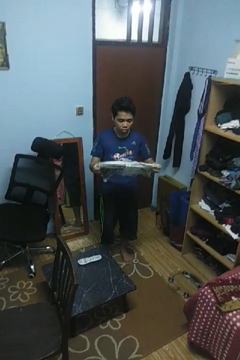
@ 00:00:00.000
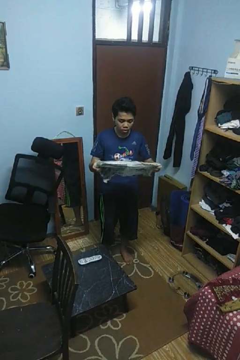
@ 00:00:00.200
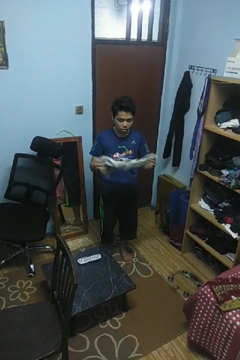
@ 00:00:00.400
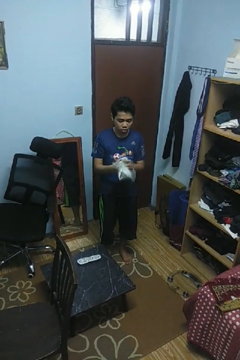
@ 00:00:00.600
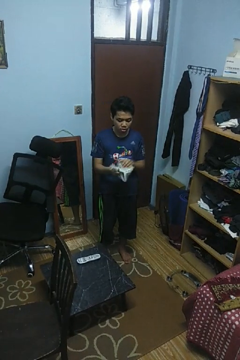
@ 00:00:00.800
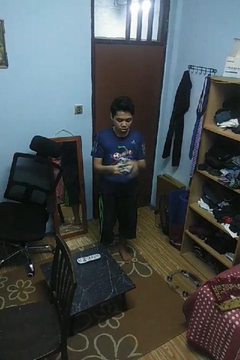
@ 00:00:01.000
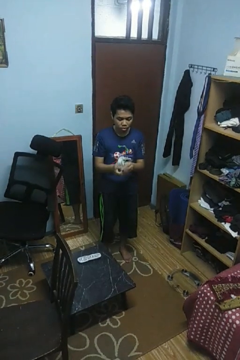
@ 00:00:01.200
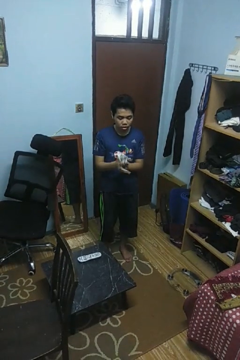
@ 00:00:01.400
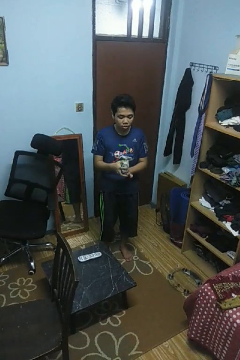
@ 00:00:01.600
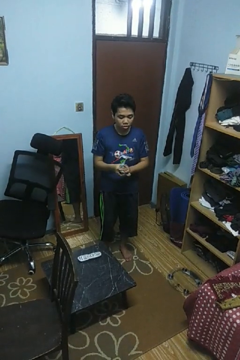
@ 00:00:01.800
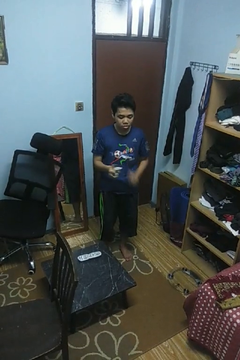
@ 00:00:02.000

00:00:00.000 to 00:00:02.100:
person crumples paper

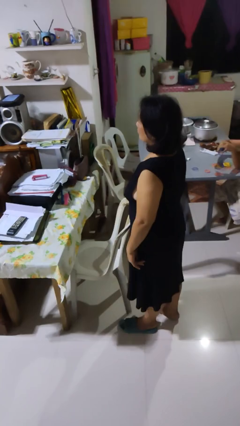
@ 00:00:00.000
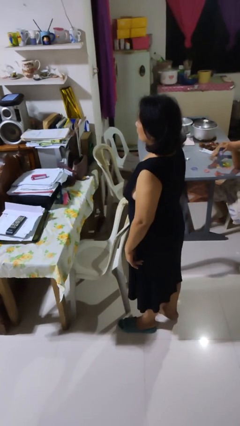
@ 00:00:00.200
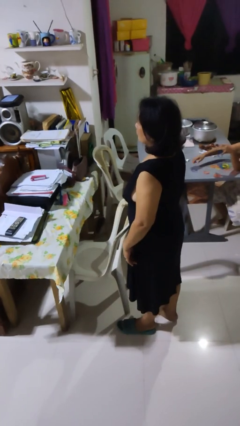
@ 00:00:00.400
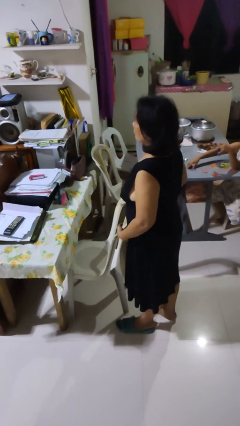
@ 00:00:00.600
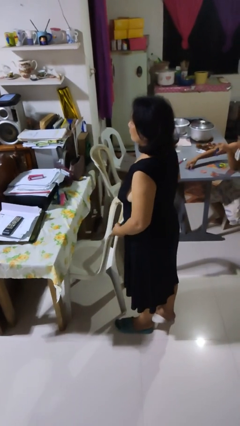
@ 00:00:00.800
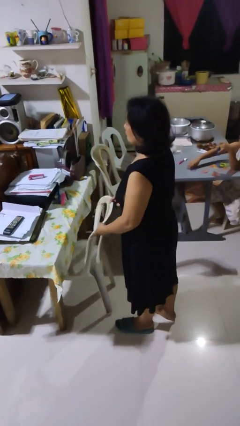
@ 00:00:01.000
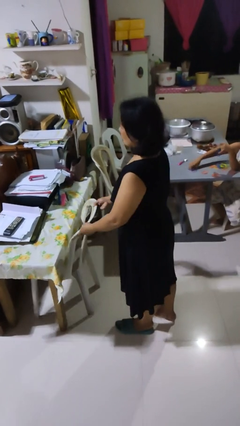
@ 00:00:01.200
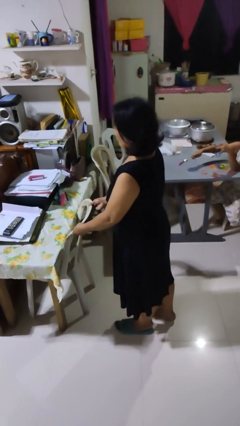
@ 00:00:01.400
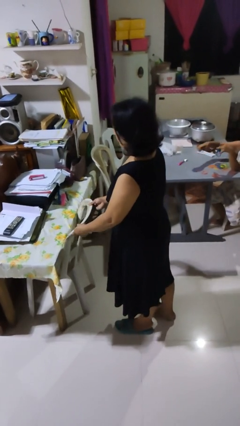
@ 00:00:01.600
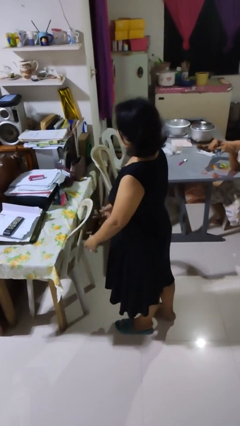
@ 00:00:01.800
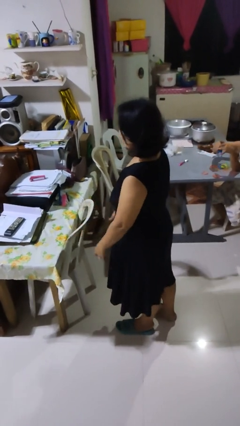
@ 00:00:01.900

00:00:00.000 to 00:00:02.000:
person pushes in chair

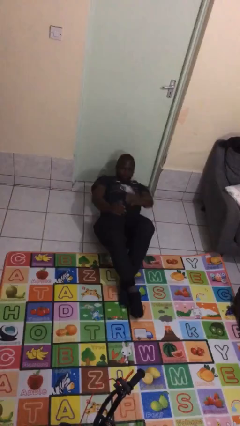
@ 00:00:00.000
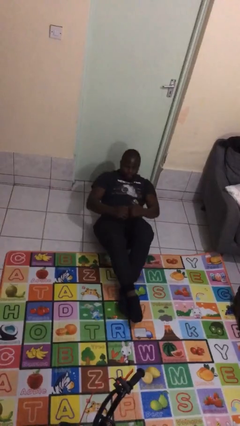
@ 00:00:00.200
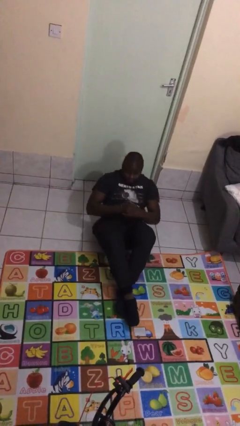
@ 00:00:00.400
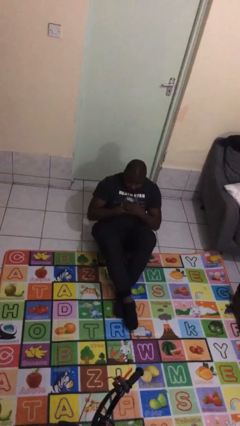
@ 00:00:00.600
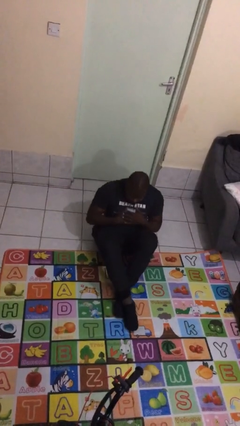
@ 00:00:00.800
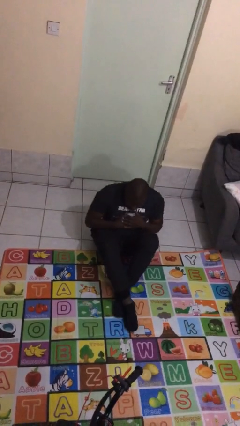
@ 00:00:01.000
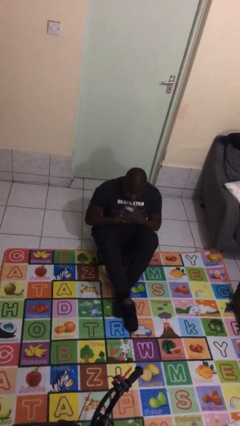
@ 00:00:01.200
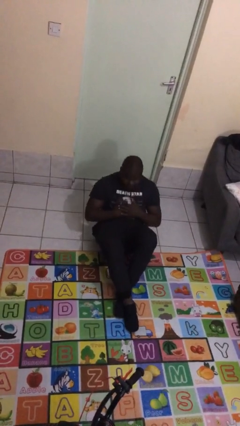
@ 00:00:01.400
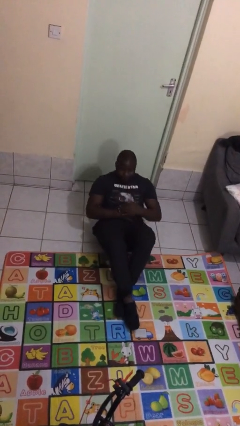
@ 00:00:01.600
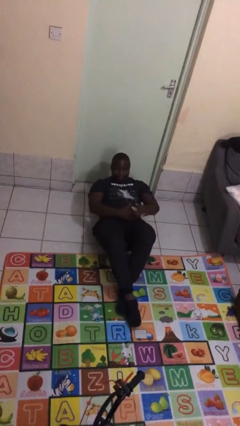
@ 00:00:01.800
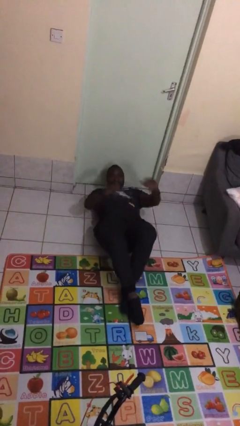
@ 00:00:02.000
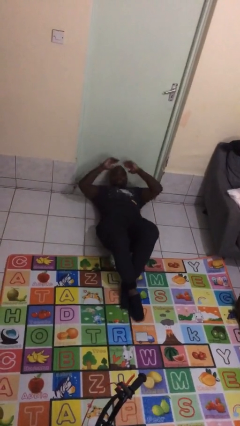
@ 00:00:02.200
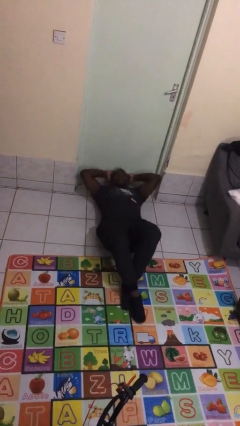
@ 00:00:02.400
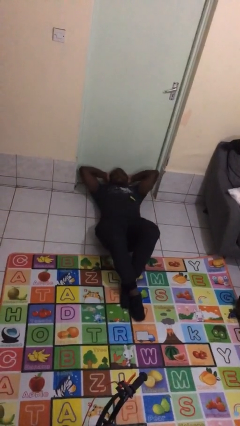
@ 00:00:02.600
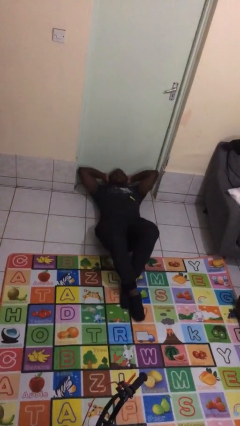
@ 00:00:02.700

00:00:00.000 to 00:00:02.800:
person exercises with situp

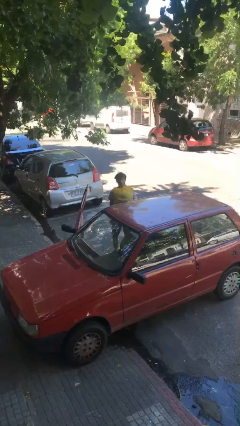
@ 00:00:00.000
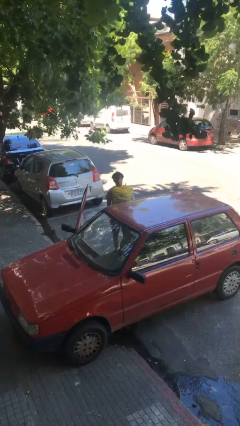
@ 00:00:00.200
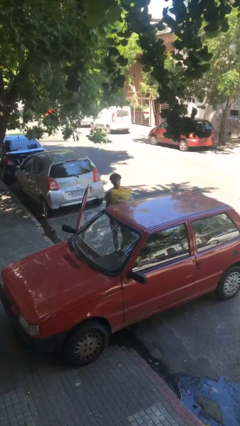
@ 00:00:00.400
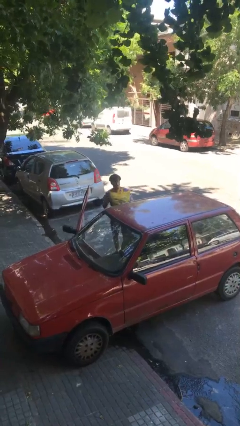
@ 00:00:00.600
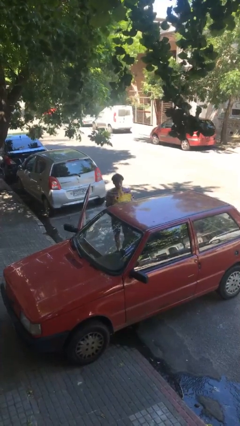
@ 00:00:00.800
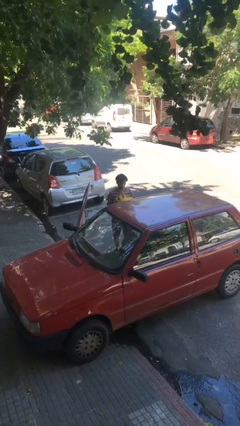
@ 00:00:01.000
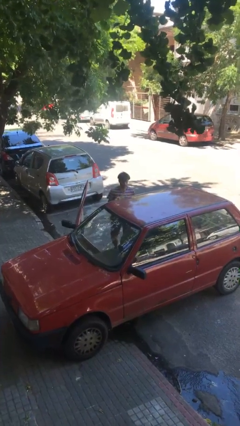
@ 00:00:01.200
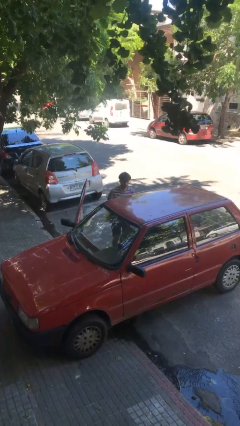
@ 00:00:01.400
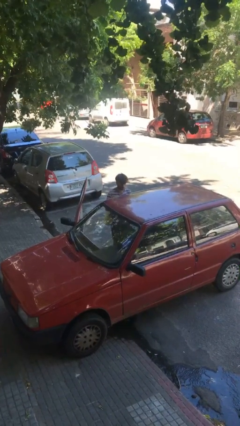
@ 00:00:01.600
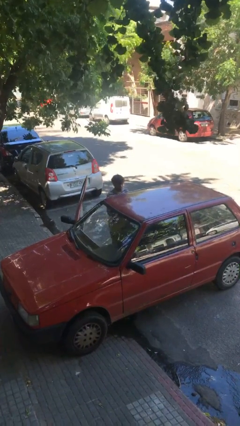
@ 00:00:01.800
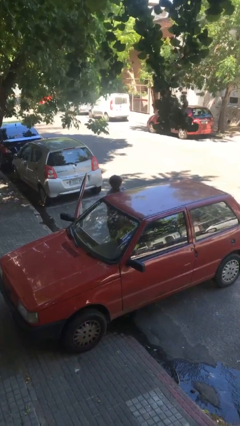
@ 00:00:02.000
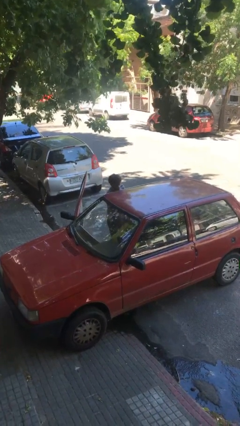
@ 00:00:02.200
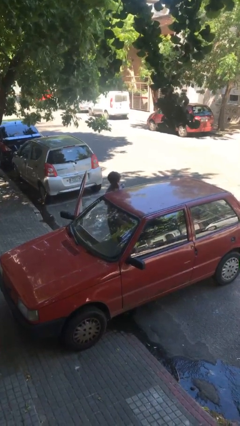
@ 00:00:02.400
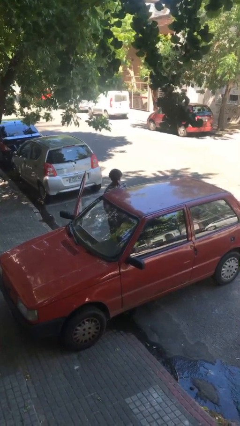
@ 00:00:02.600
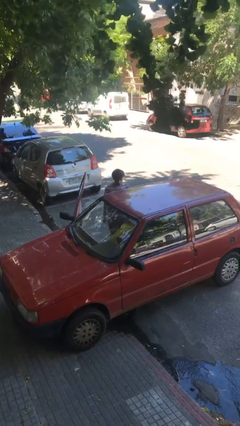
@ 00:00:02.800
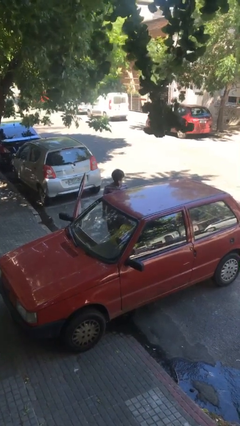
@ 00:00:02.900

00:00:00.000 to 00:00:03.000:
person loads car

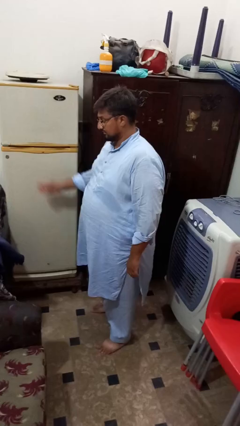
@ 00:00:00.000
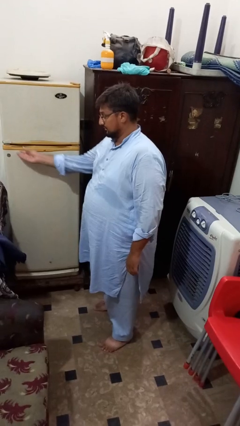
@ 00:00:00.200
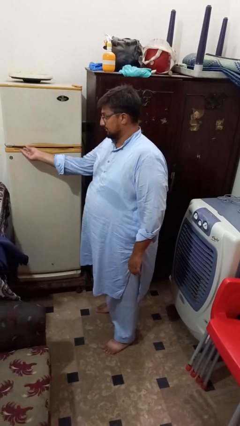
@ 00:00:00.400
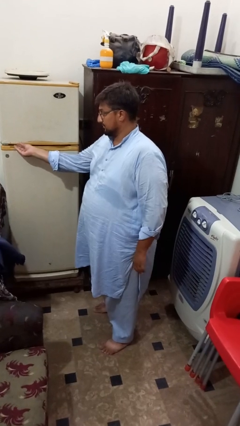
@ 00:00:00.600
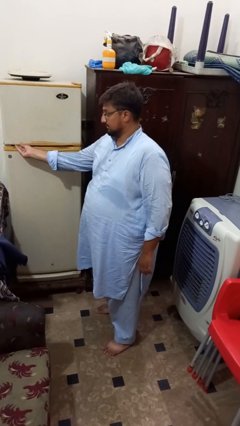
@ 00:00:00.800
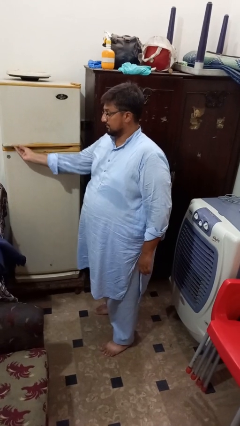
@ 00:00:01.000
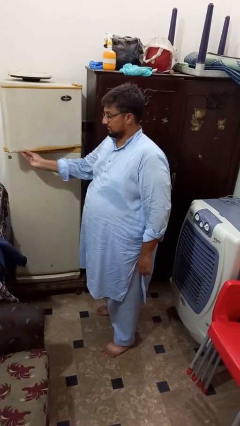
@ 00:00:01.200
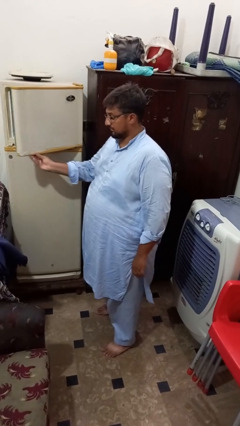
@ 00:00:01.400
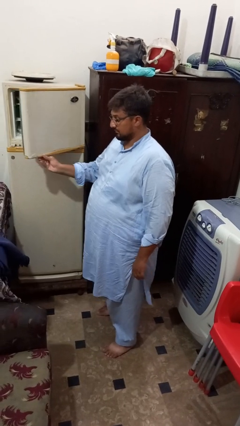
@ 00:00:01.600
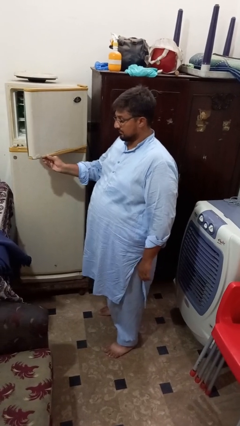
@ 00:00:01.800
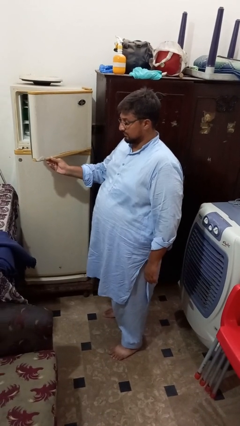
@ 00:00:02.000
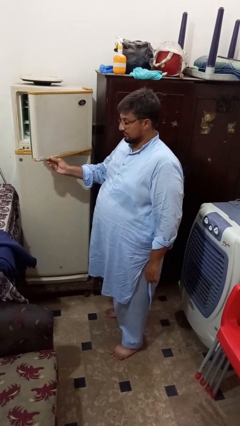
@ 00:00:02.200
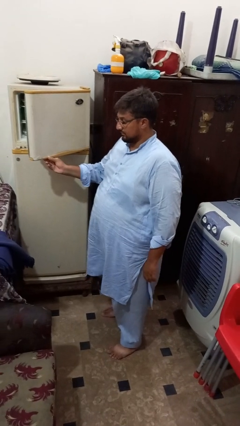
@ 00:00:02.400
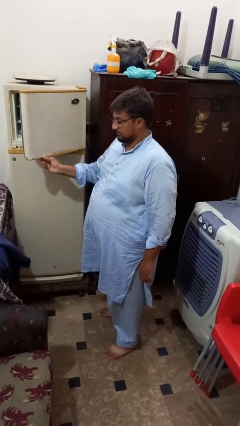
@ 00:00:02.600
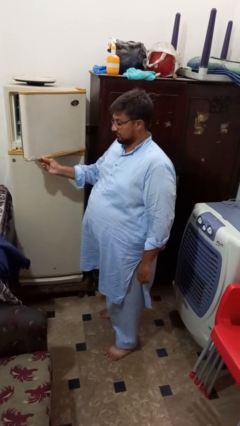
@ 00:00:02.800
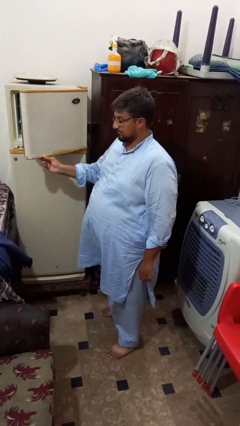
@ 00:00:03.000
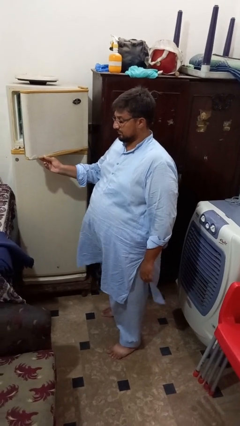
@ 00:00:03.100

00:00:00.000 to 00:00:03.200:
person opens refrigerator

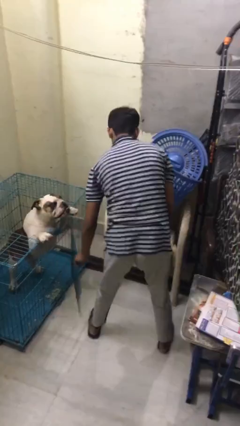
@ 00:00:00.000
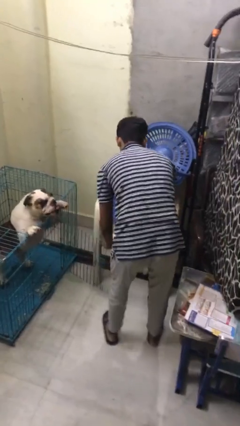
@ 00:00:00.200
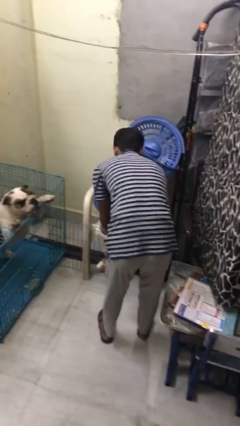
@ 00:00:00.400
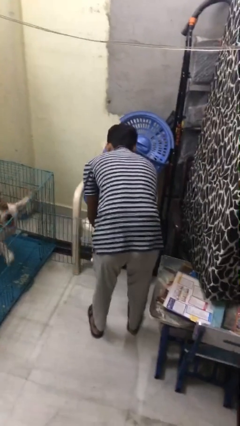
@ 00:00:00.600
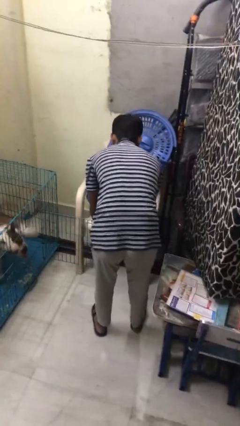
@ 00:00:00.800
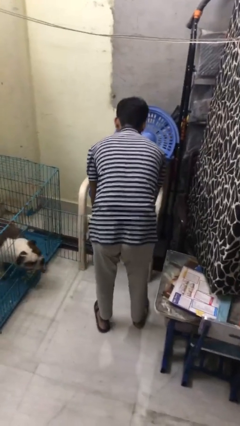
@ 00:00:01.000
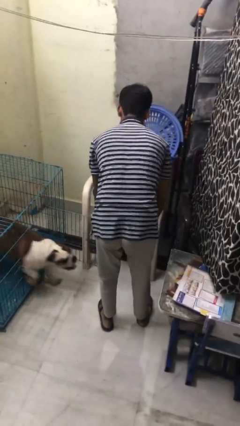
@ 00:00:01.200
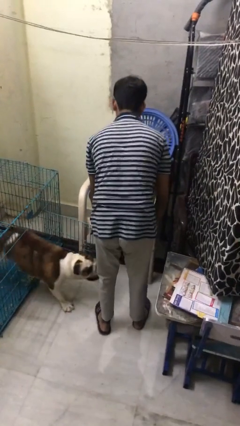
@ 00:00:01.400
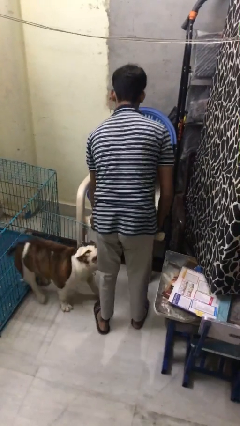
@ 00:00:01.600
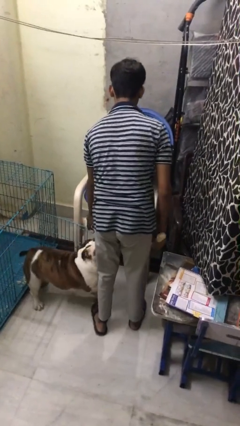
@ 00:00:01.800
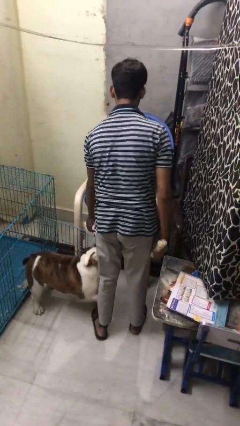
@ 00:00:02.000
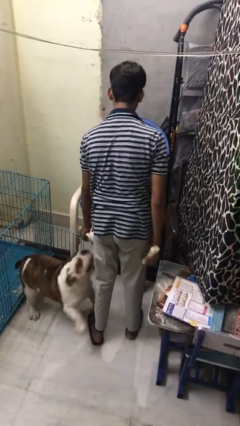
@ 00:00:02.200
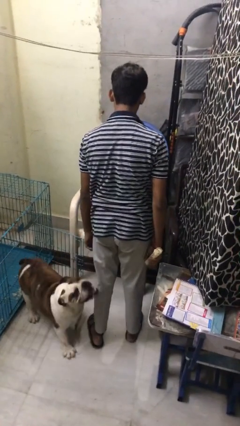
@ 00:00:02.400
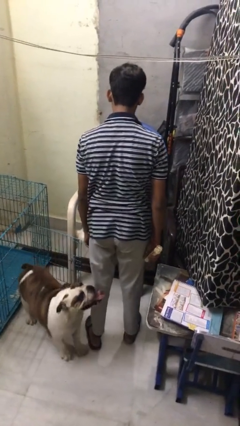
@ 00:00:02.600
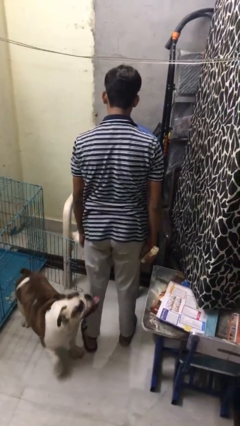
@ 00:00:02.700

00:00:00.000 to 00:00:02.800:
person uncrates dog

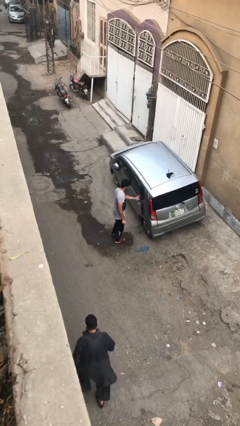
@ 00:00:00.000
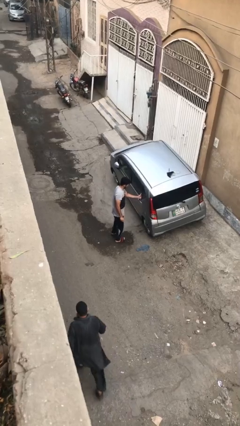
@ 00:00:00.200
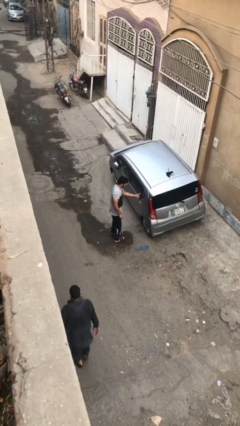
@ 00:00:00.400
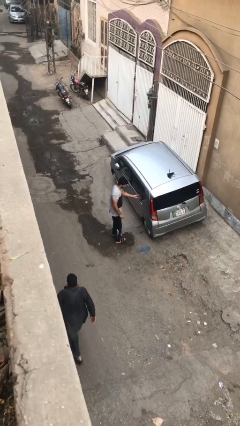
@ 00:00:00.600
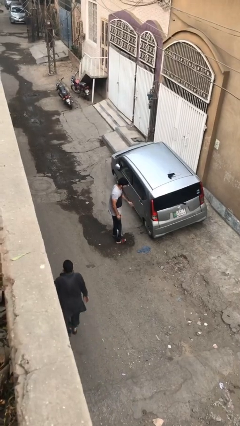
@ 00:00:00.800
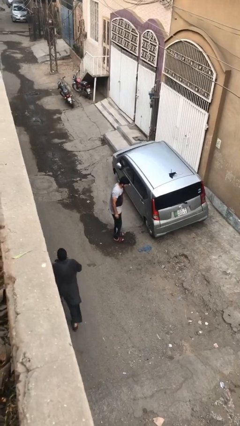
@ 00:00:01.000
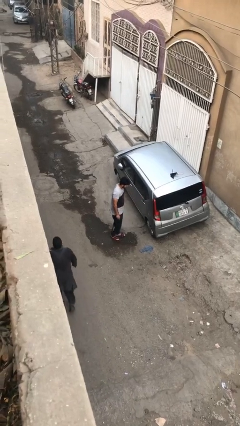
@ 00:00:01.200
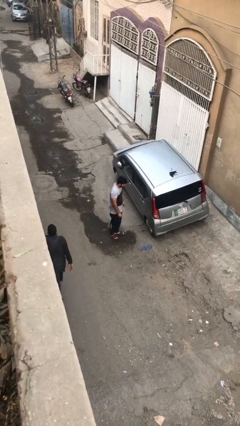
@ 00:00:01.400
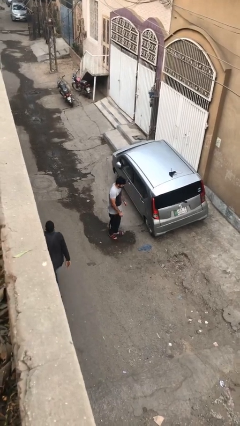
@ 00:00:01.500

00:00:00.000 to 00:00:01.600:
person closes car door
